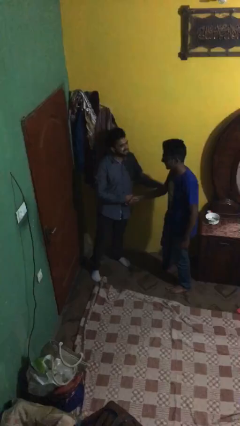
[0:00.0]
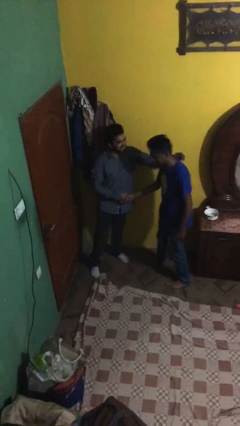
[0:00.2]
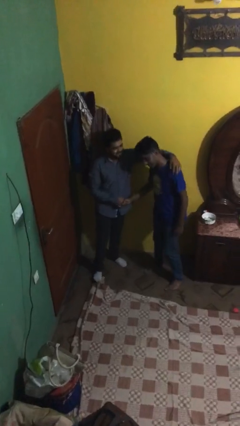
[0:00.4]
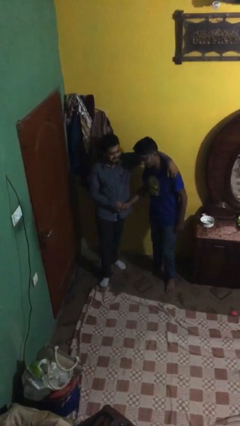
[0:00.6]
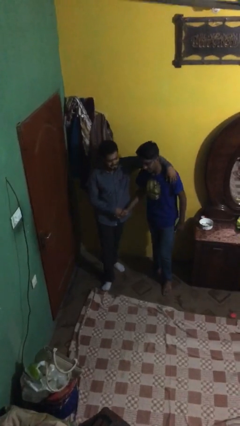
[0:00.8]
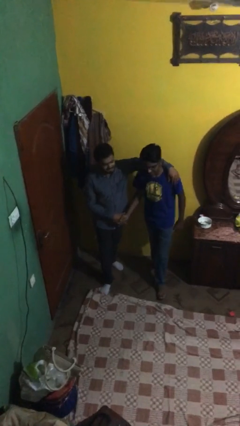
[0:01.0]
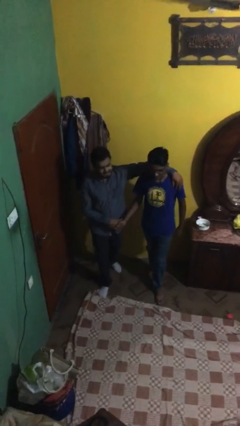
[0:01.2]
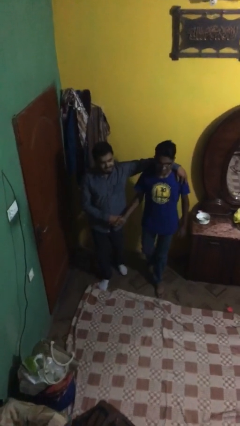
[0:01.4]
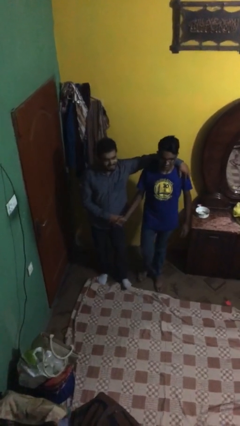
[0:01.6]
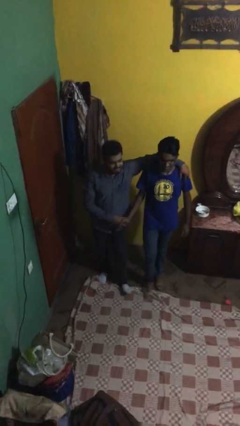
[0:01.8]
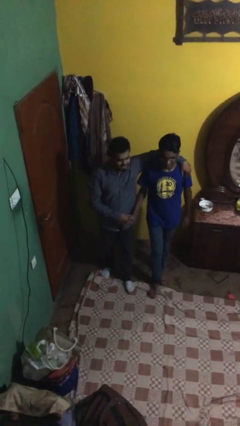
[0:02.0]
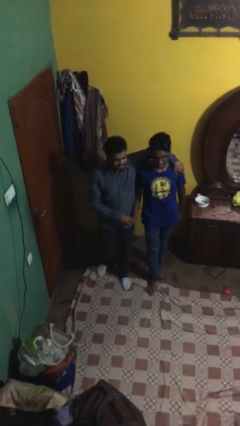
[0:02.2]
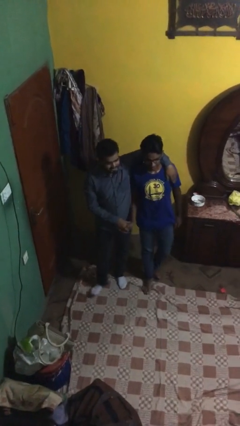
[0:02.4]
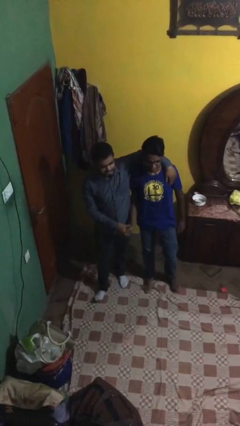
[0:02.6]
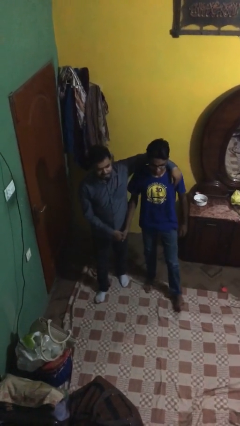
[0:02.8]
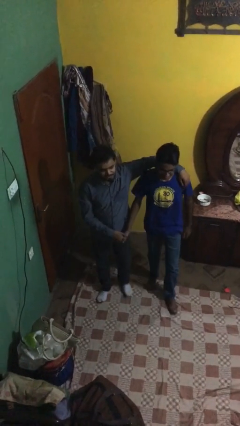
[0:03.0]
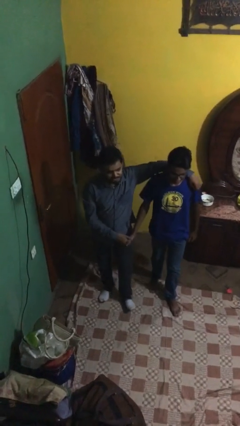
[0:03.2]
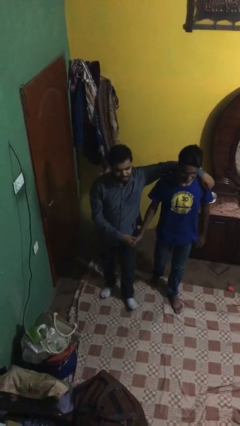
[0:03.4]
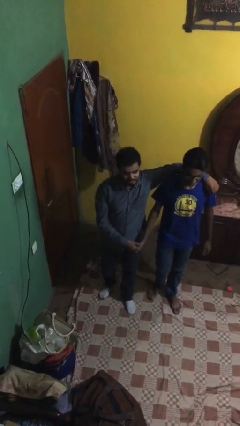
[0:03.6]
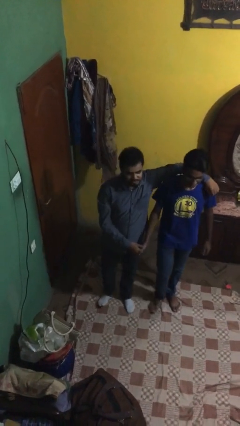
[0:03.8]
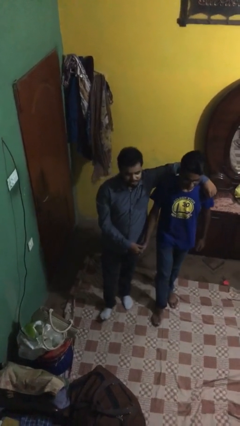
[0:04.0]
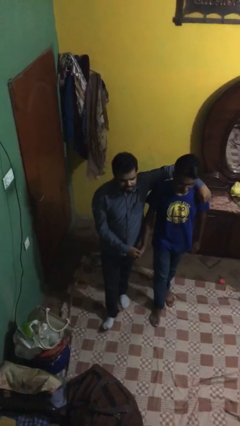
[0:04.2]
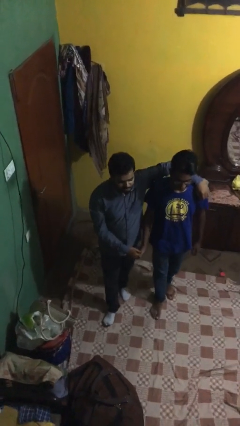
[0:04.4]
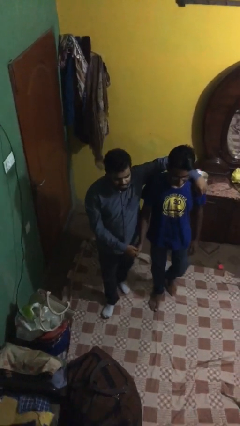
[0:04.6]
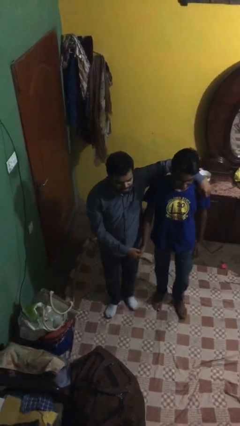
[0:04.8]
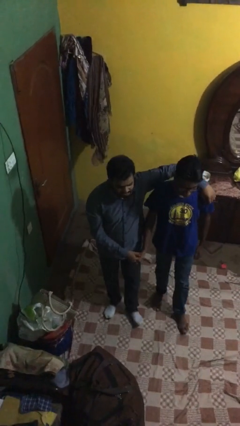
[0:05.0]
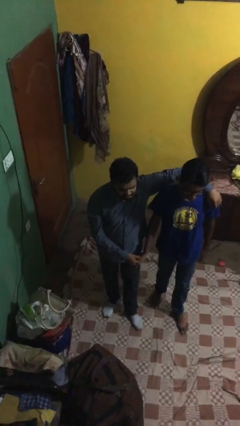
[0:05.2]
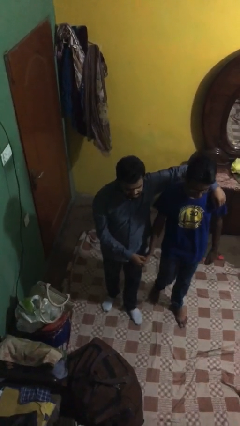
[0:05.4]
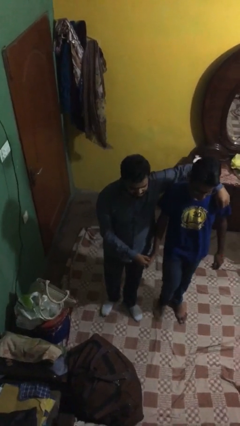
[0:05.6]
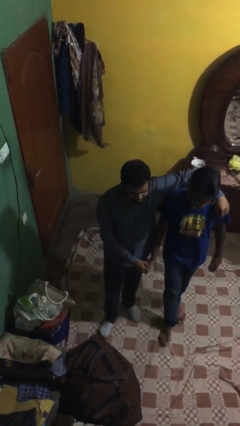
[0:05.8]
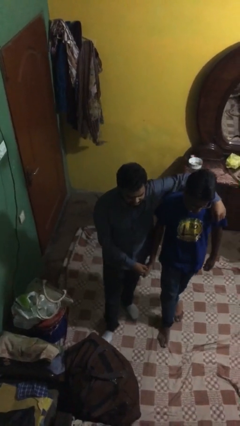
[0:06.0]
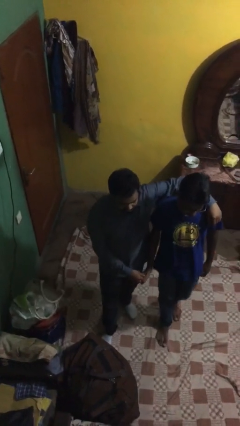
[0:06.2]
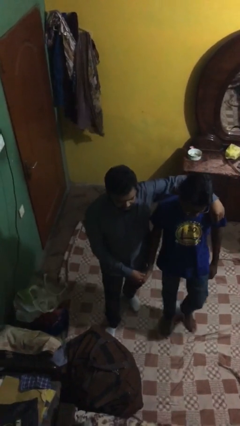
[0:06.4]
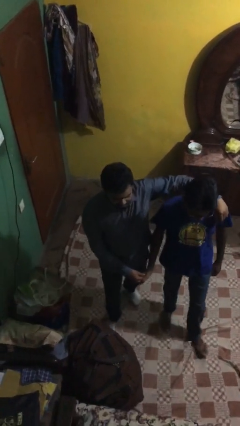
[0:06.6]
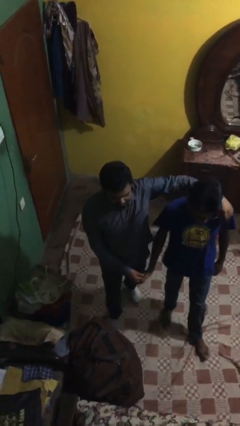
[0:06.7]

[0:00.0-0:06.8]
person talks to person

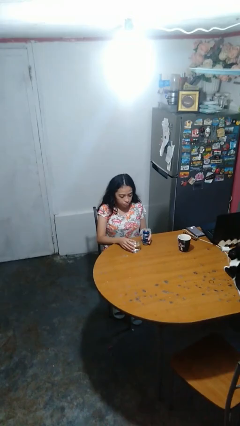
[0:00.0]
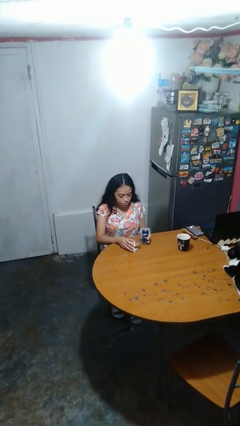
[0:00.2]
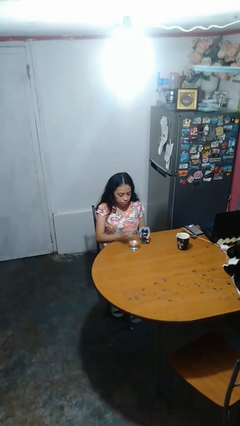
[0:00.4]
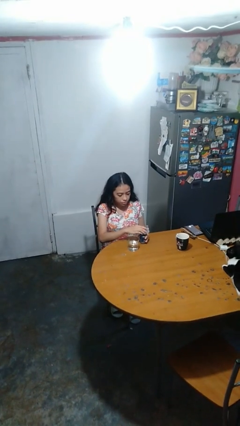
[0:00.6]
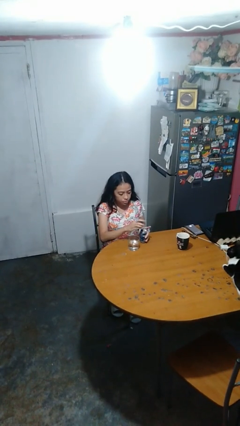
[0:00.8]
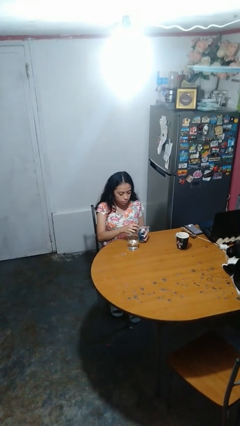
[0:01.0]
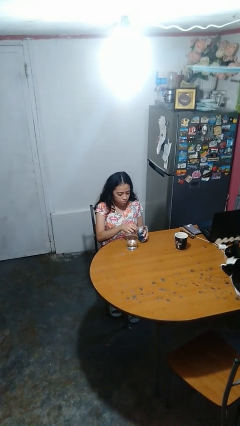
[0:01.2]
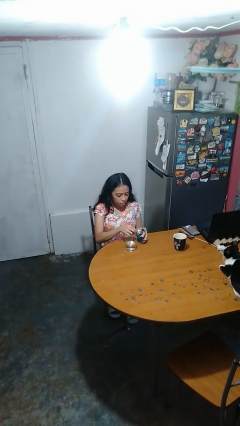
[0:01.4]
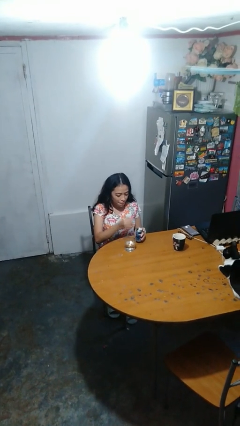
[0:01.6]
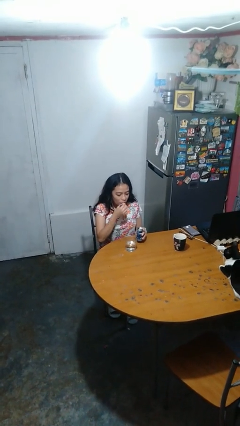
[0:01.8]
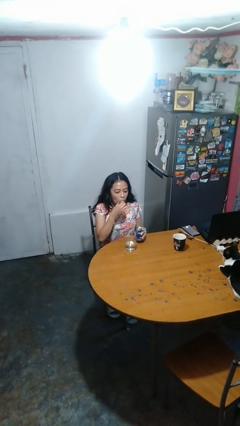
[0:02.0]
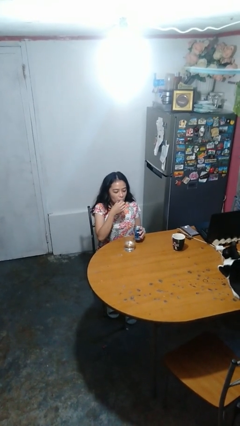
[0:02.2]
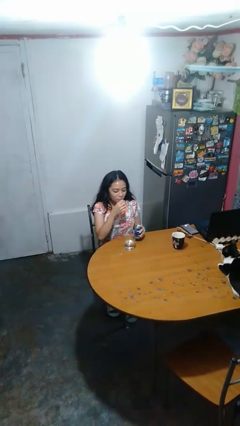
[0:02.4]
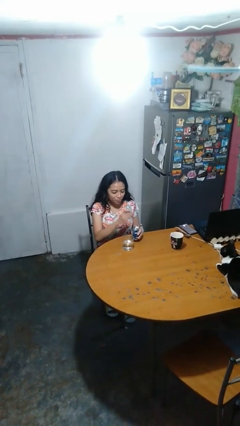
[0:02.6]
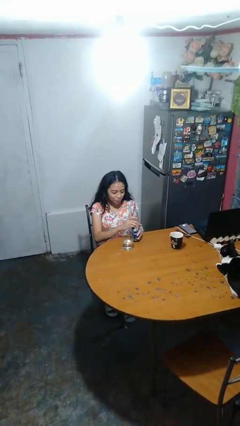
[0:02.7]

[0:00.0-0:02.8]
person takes medicine pills

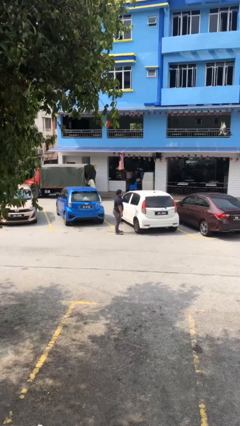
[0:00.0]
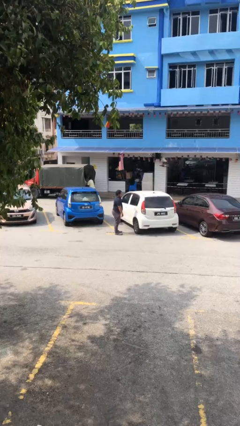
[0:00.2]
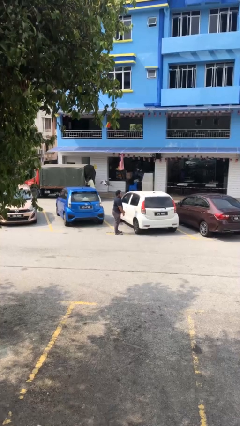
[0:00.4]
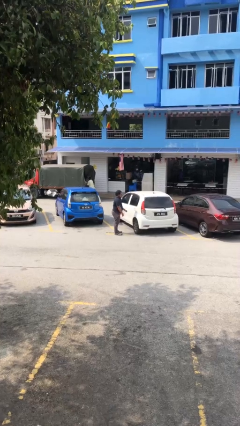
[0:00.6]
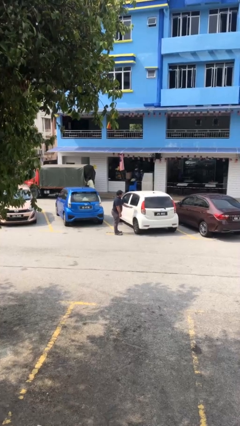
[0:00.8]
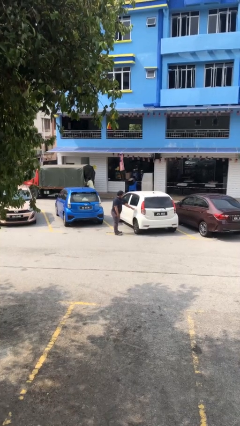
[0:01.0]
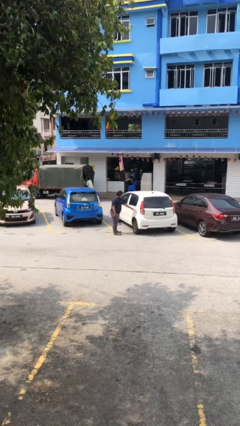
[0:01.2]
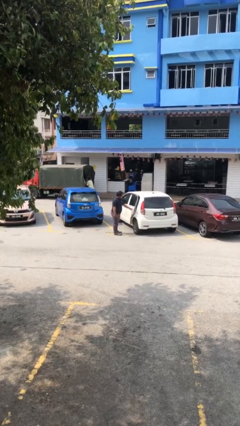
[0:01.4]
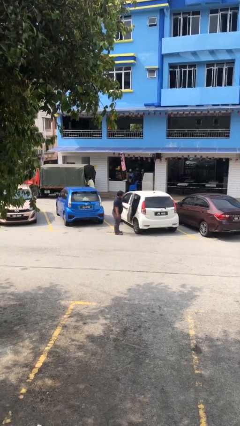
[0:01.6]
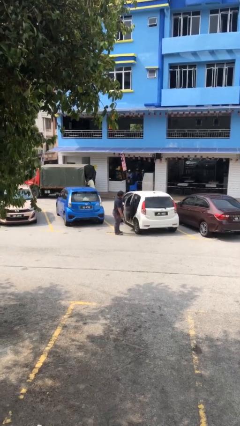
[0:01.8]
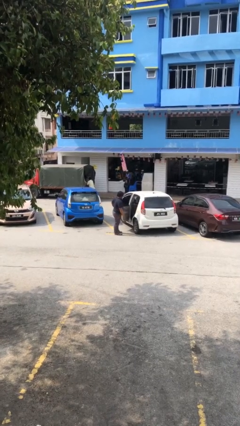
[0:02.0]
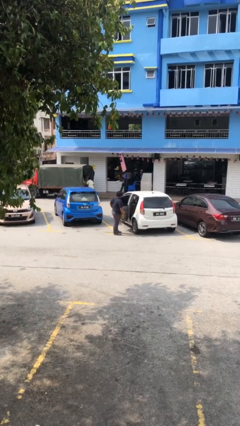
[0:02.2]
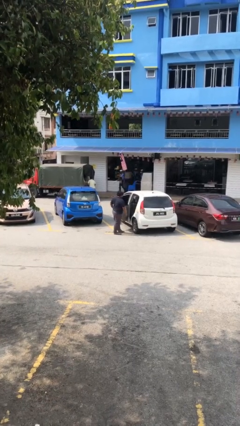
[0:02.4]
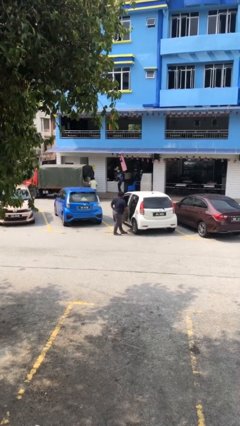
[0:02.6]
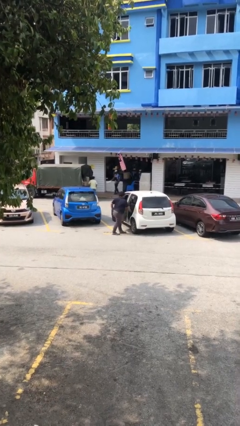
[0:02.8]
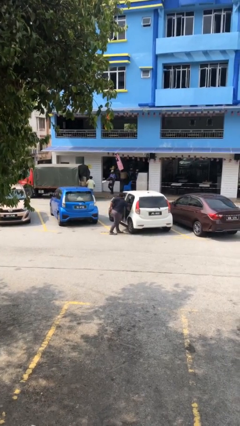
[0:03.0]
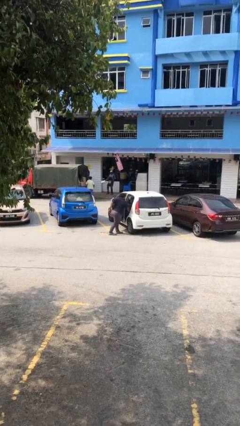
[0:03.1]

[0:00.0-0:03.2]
person opens car door

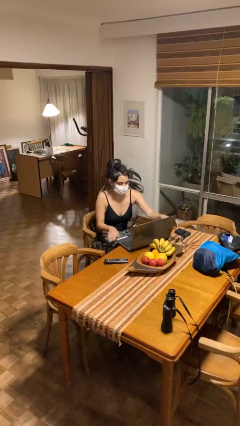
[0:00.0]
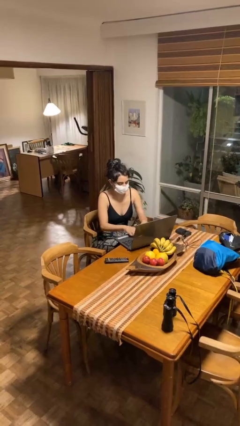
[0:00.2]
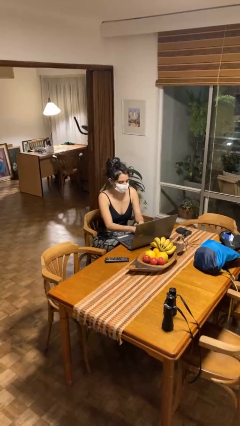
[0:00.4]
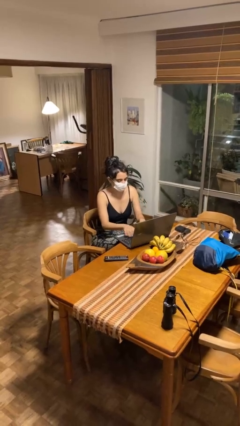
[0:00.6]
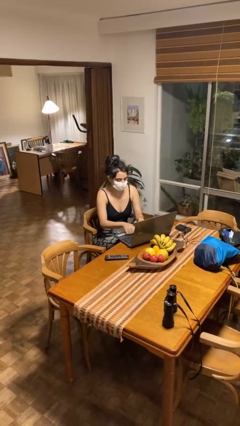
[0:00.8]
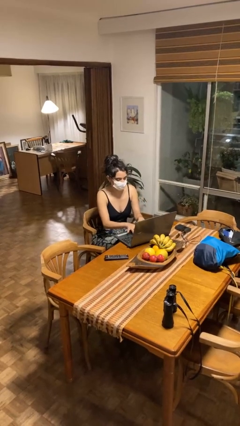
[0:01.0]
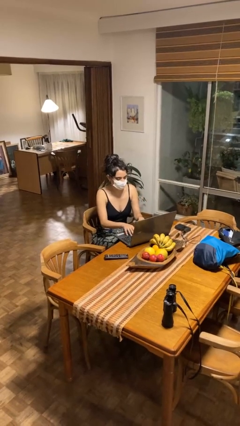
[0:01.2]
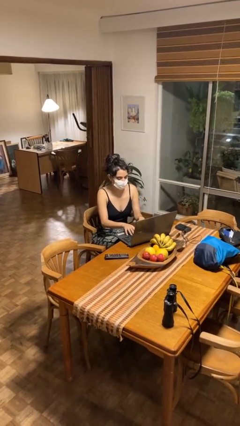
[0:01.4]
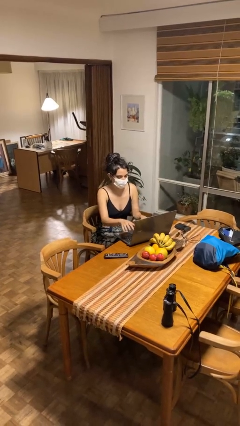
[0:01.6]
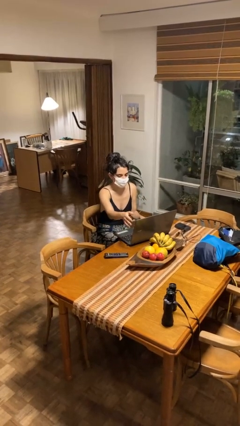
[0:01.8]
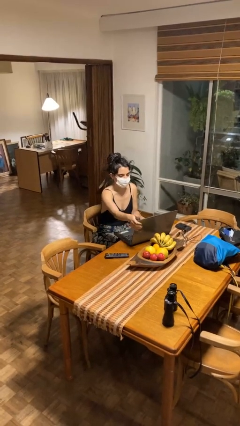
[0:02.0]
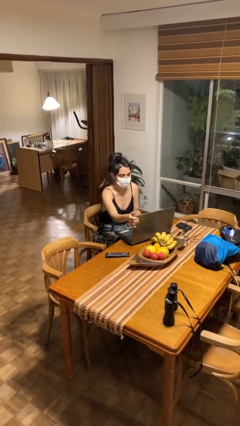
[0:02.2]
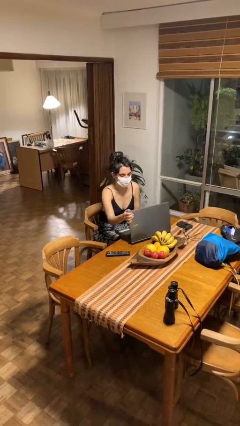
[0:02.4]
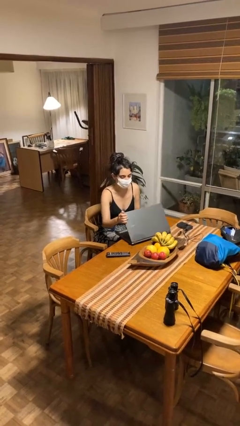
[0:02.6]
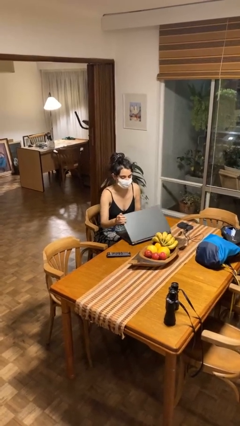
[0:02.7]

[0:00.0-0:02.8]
person interacts with laptop

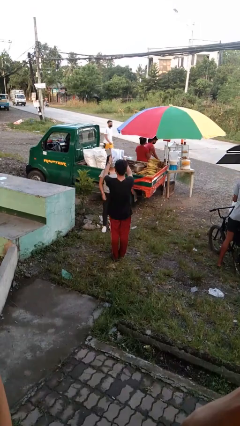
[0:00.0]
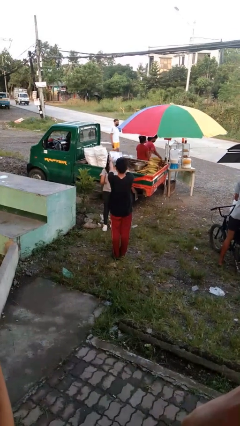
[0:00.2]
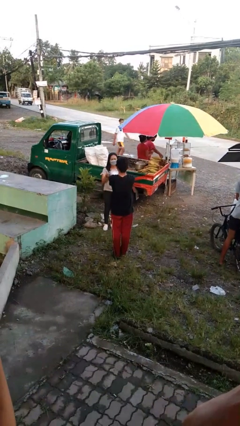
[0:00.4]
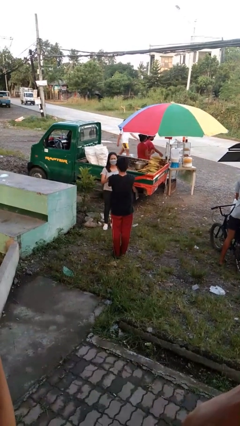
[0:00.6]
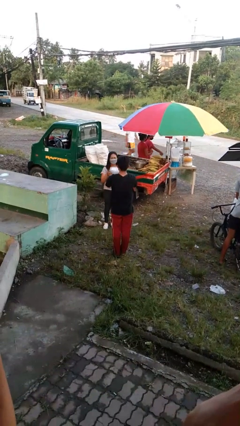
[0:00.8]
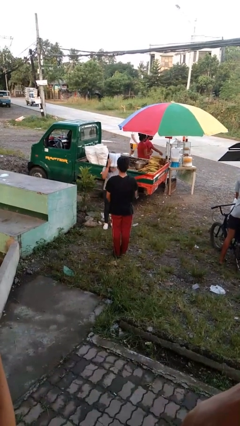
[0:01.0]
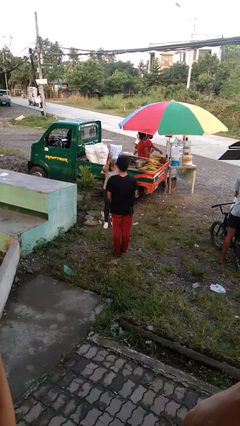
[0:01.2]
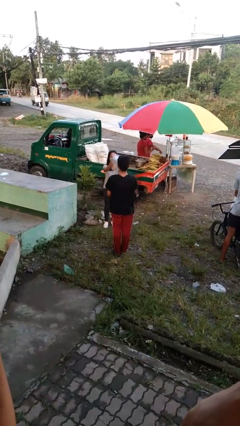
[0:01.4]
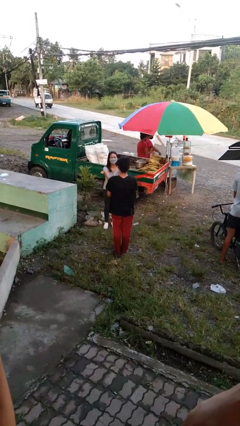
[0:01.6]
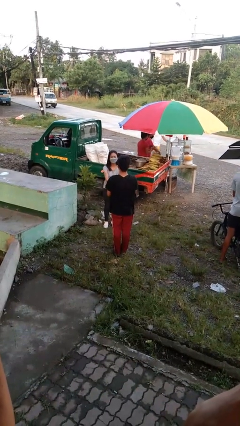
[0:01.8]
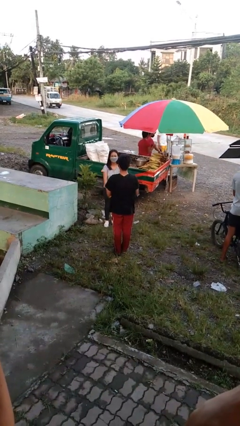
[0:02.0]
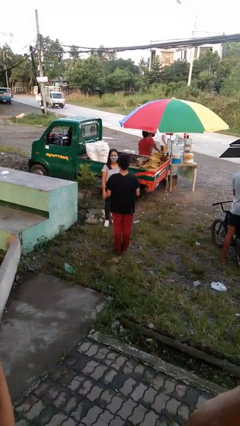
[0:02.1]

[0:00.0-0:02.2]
person transfers object to person
